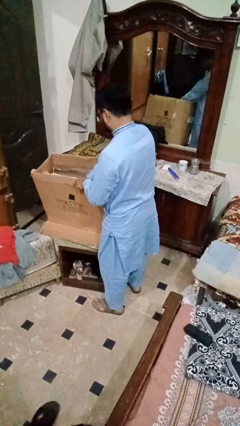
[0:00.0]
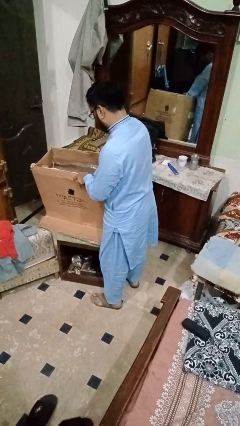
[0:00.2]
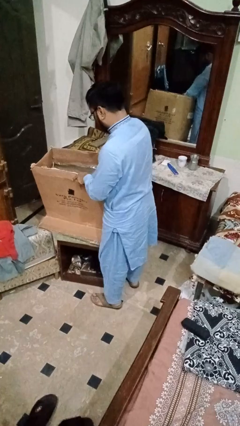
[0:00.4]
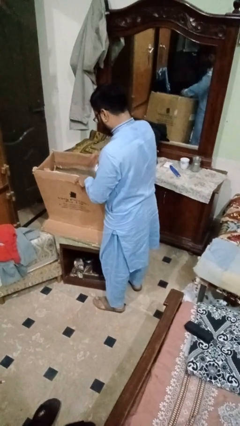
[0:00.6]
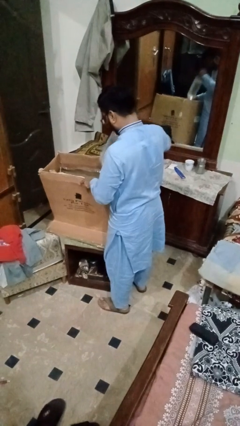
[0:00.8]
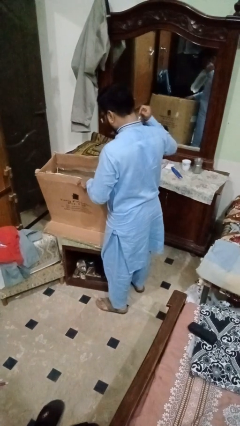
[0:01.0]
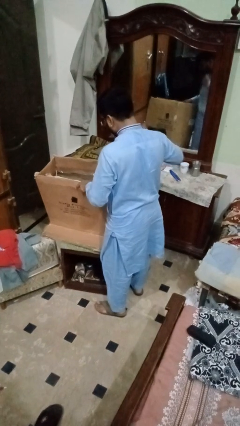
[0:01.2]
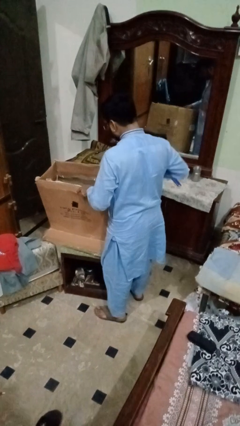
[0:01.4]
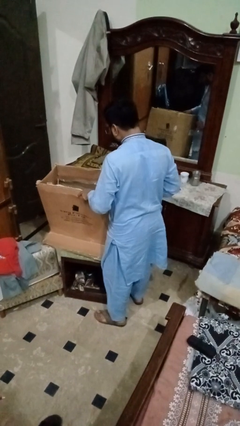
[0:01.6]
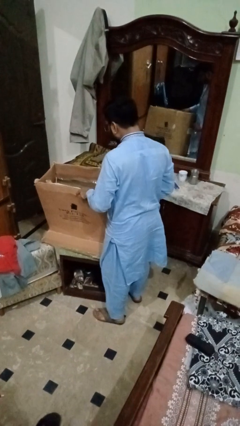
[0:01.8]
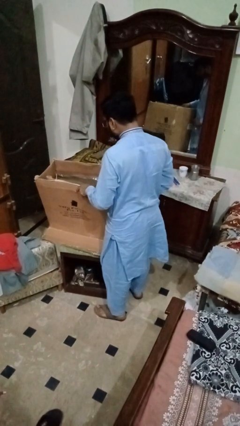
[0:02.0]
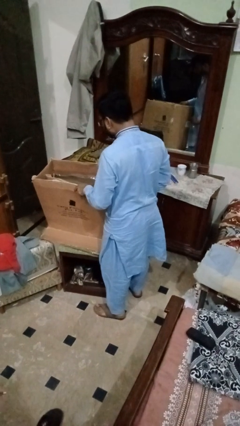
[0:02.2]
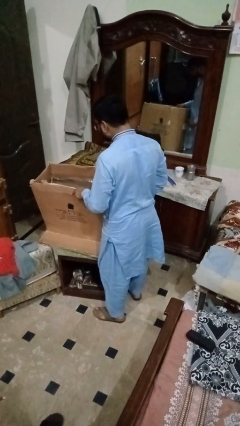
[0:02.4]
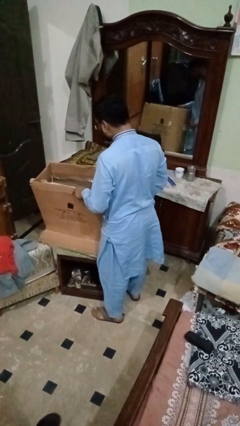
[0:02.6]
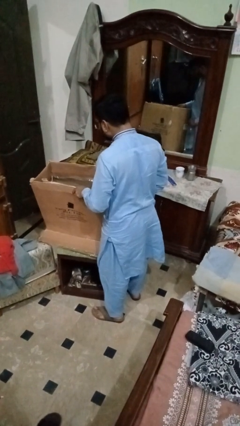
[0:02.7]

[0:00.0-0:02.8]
person takes object from box

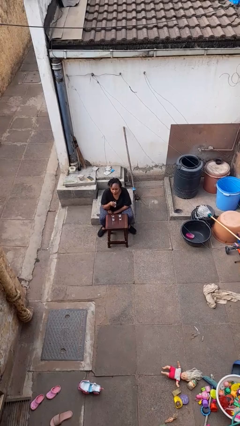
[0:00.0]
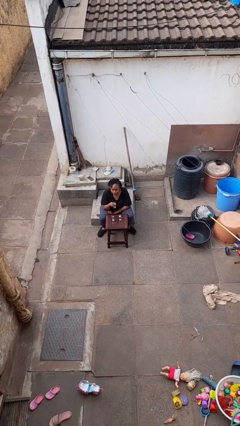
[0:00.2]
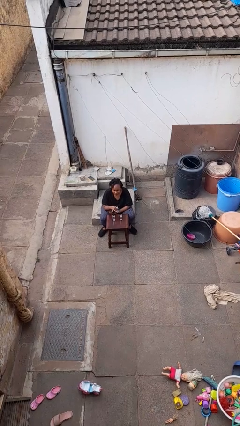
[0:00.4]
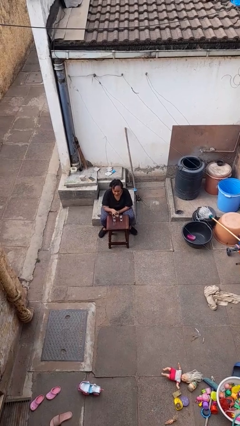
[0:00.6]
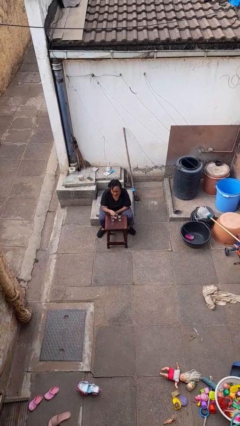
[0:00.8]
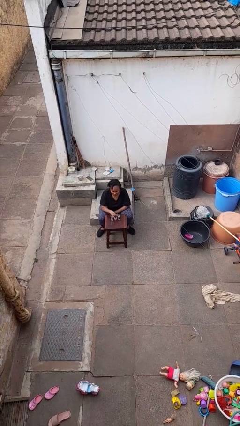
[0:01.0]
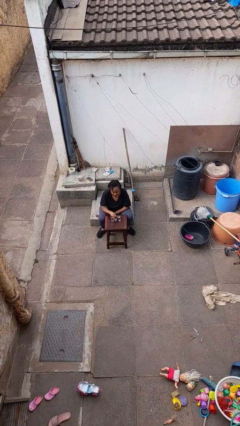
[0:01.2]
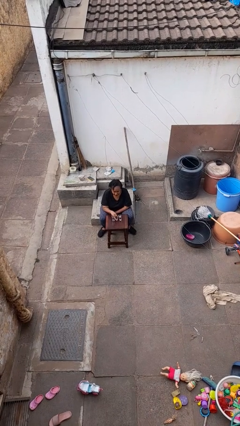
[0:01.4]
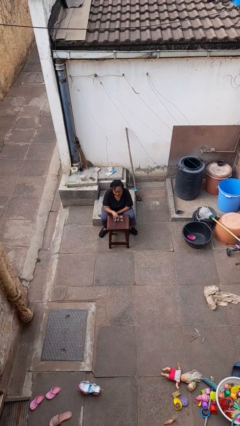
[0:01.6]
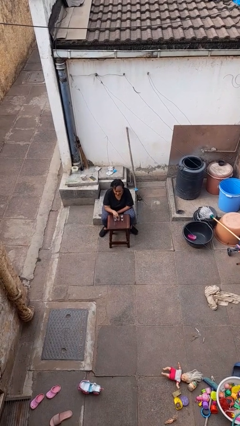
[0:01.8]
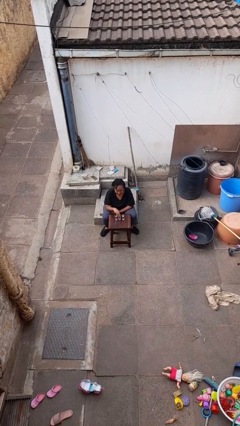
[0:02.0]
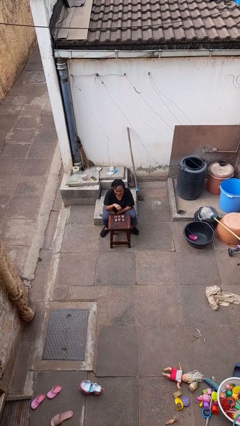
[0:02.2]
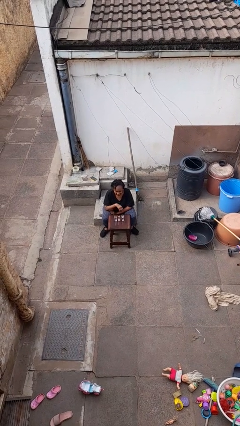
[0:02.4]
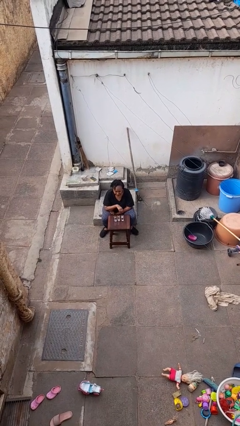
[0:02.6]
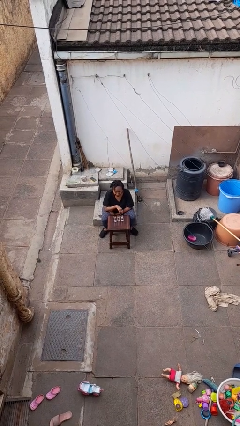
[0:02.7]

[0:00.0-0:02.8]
person puts down object on table

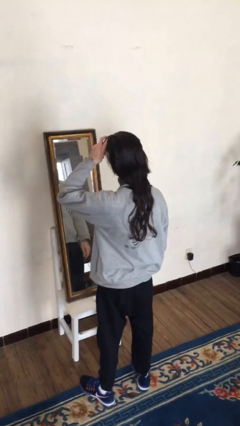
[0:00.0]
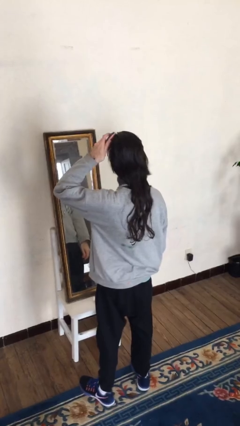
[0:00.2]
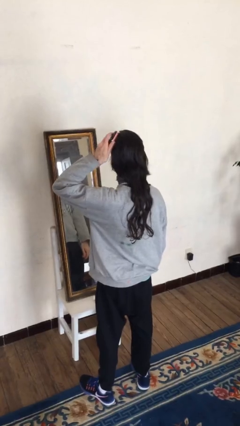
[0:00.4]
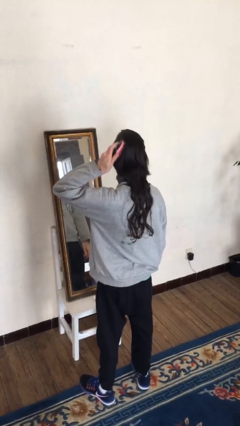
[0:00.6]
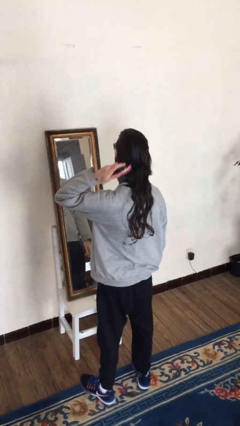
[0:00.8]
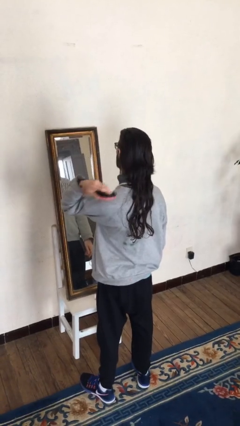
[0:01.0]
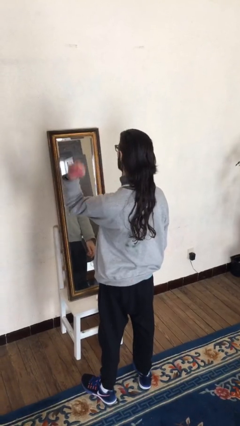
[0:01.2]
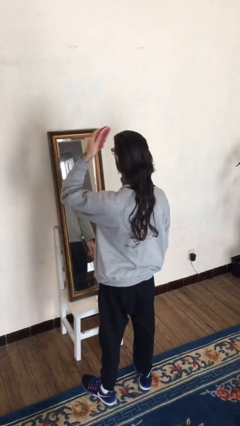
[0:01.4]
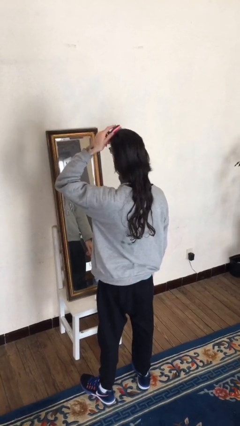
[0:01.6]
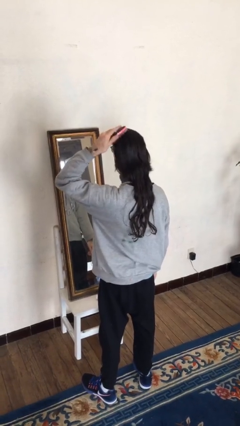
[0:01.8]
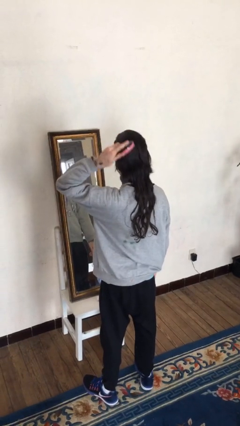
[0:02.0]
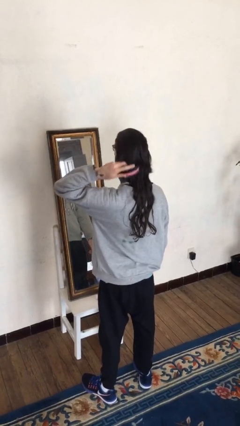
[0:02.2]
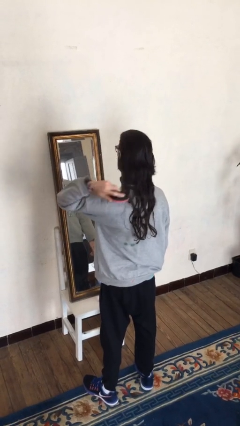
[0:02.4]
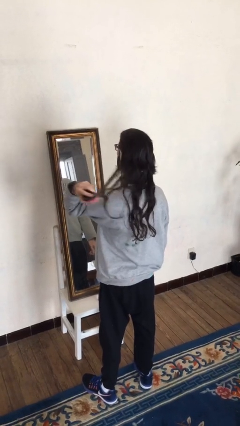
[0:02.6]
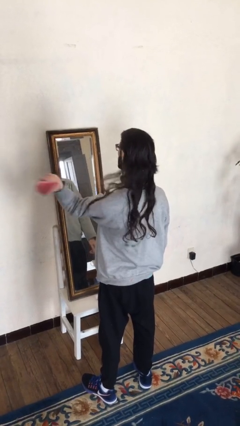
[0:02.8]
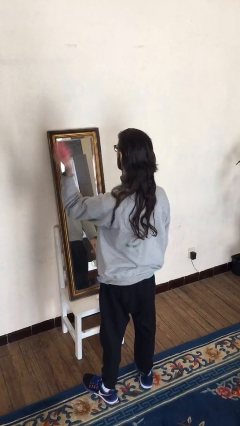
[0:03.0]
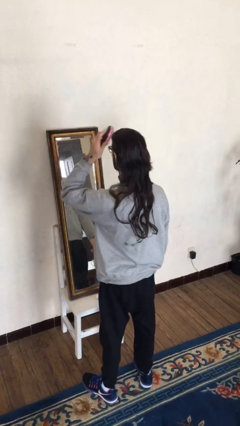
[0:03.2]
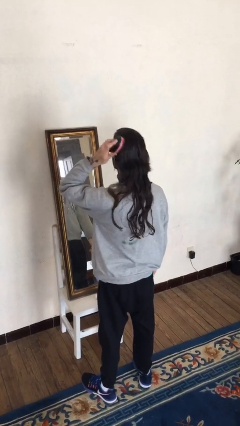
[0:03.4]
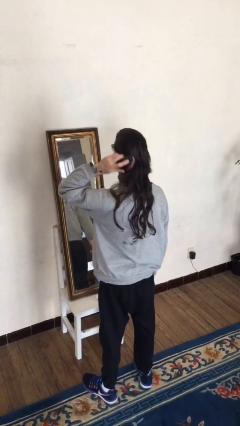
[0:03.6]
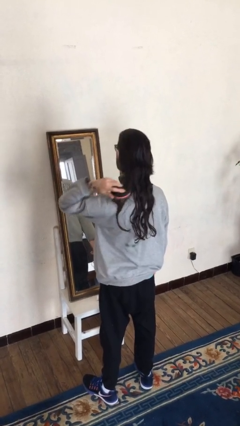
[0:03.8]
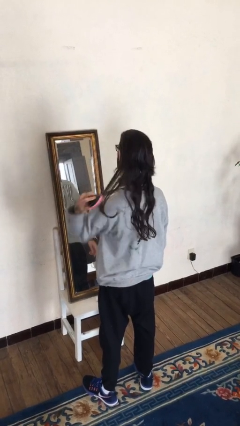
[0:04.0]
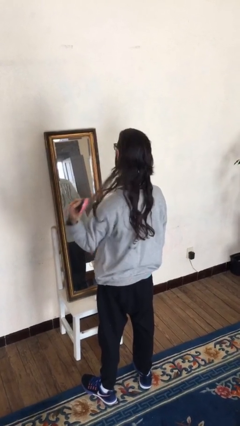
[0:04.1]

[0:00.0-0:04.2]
person brushes hair

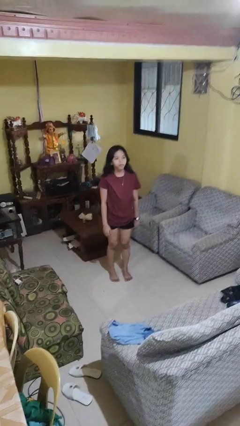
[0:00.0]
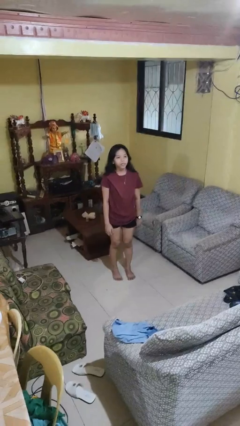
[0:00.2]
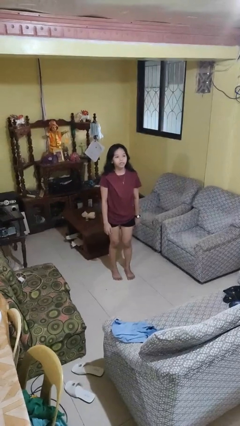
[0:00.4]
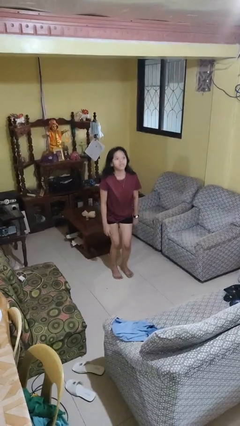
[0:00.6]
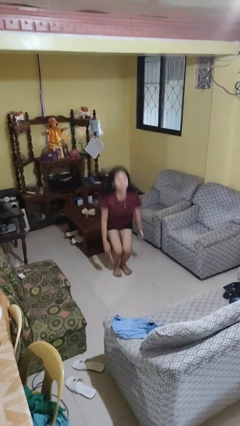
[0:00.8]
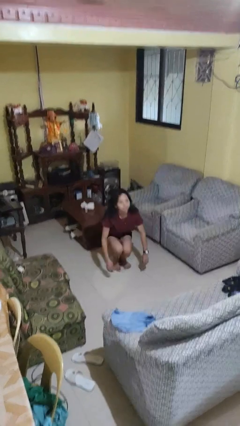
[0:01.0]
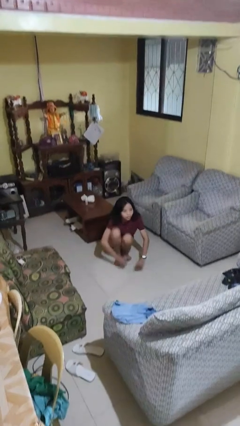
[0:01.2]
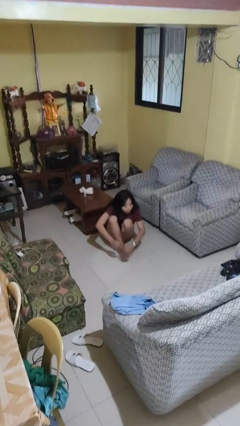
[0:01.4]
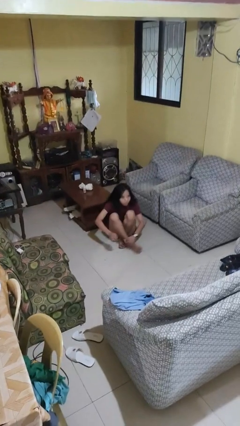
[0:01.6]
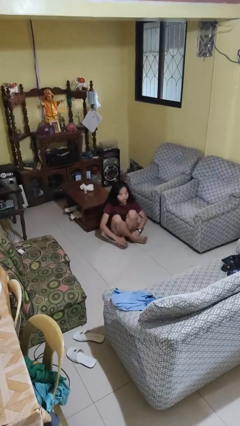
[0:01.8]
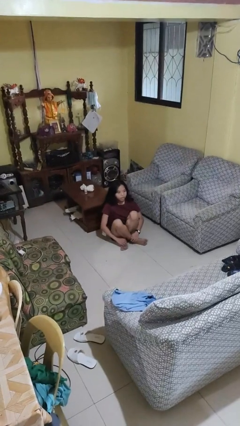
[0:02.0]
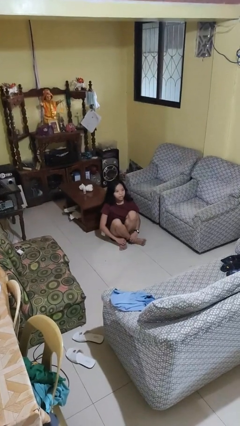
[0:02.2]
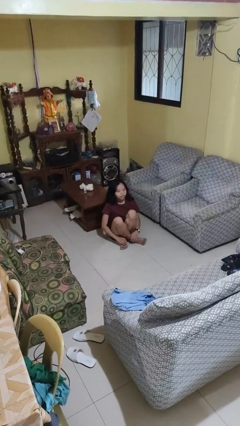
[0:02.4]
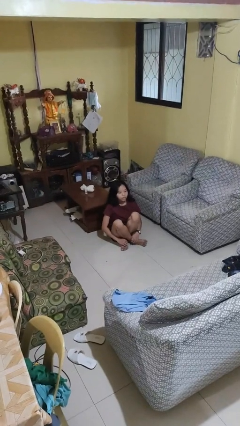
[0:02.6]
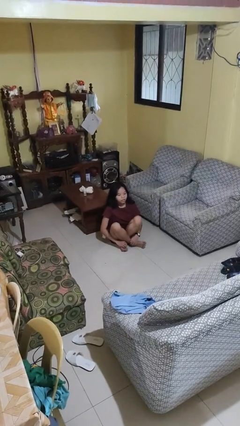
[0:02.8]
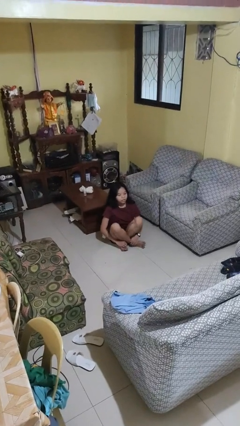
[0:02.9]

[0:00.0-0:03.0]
person sits crisscross

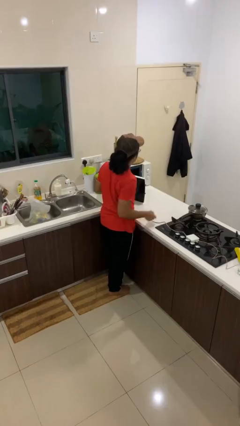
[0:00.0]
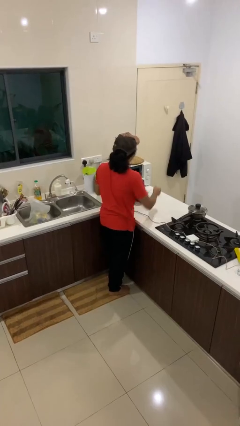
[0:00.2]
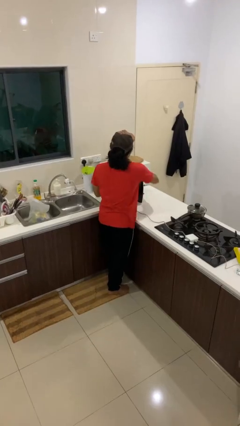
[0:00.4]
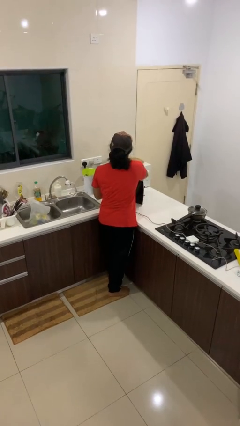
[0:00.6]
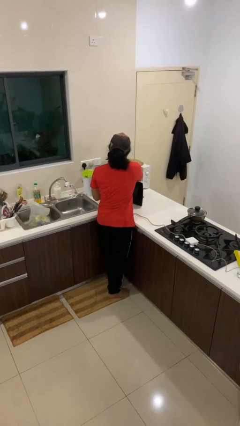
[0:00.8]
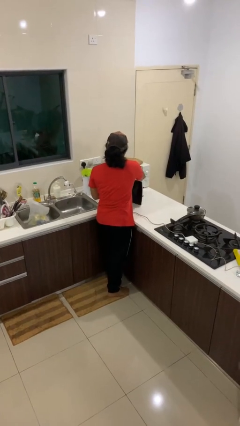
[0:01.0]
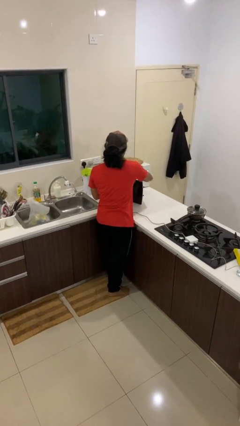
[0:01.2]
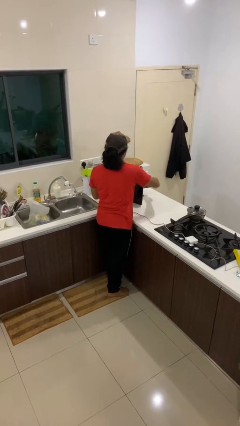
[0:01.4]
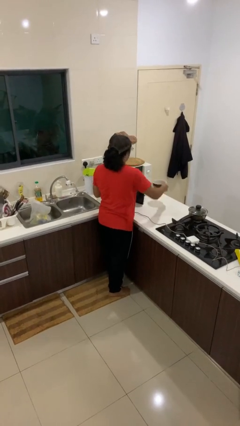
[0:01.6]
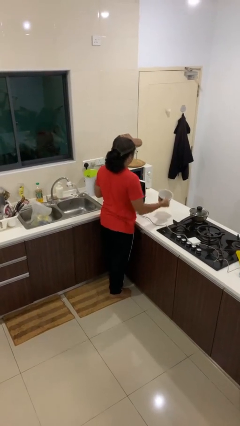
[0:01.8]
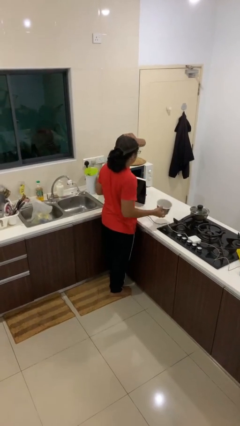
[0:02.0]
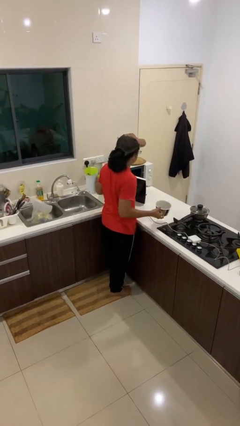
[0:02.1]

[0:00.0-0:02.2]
person takes object from microwave

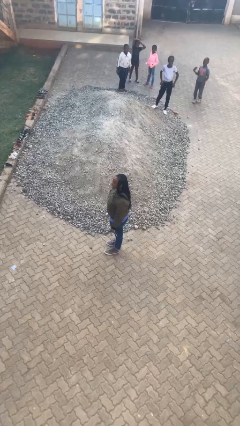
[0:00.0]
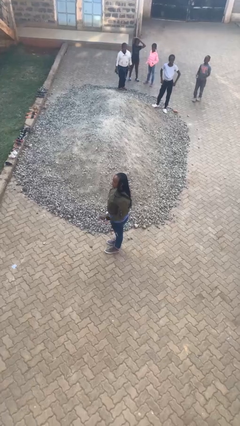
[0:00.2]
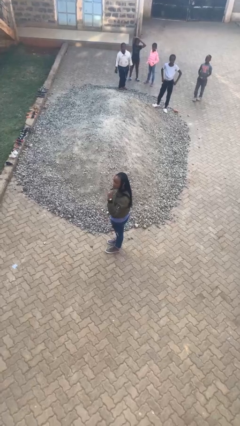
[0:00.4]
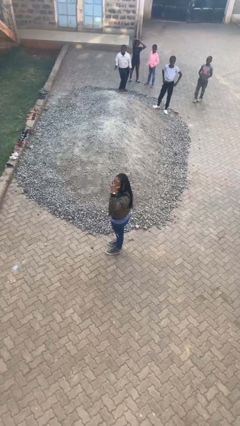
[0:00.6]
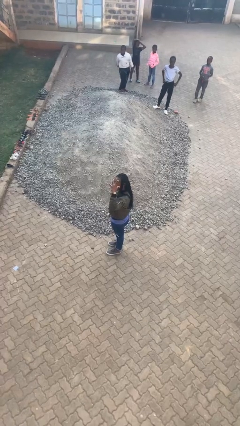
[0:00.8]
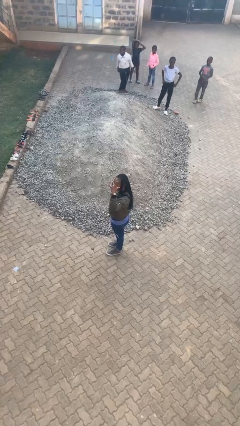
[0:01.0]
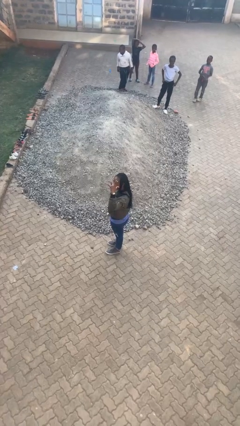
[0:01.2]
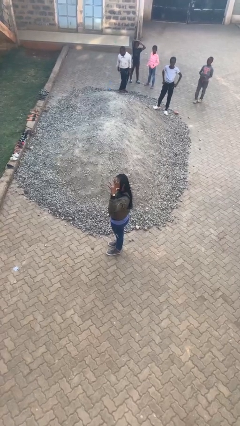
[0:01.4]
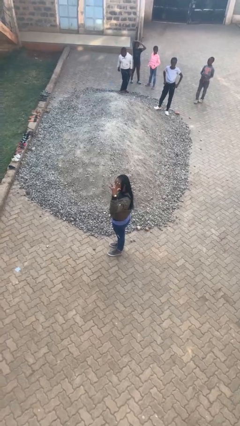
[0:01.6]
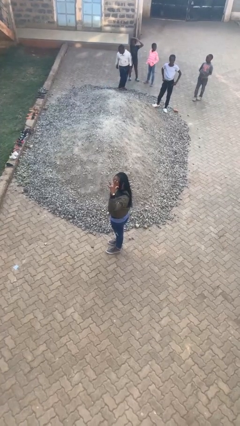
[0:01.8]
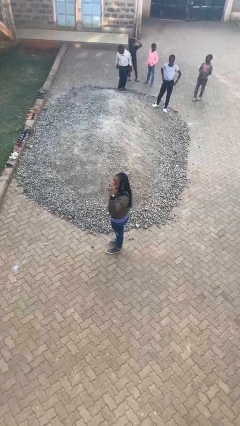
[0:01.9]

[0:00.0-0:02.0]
person gestures number five
